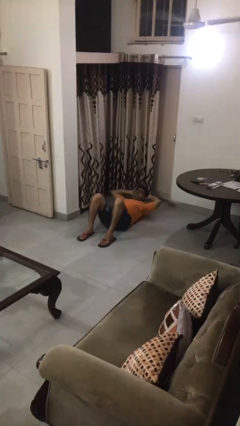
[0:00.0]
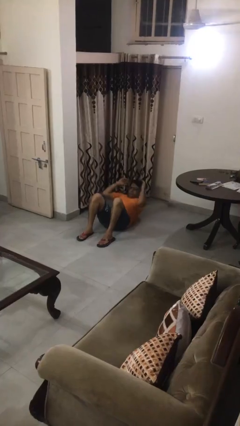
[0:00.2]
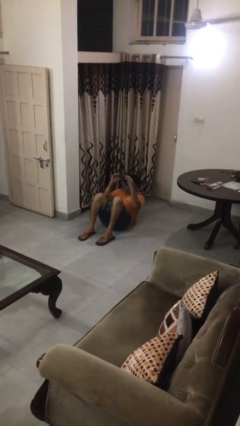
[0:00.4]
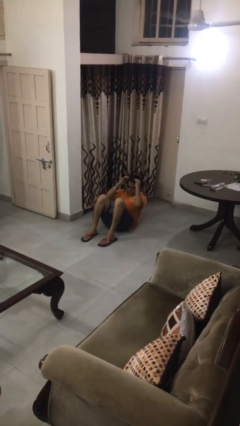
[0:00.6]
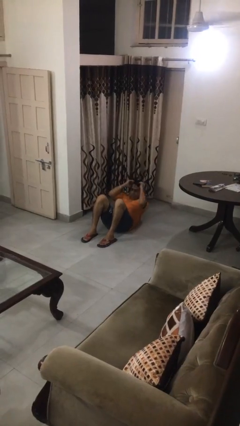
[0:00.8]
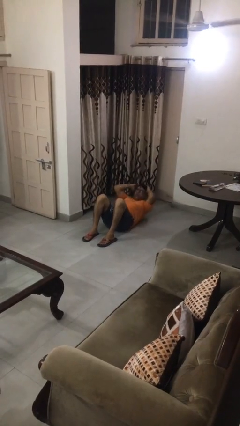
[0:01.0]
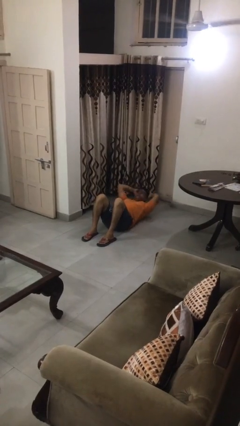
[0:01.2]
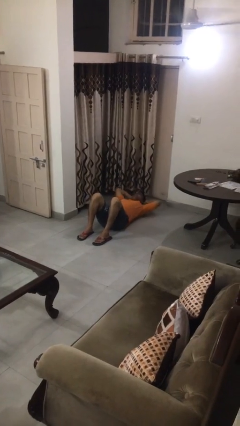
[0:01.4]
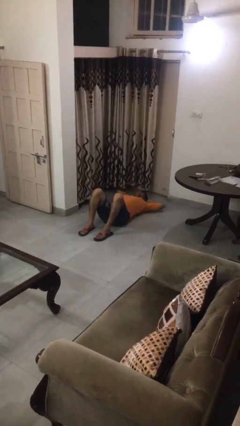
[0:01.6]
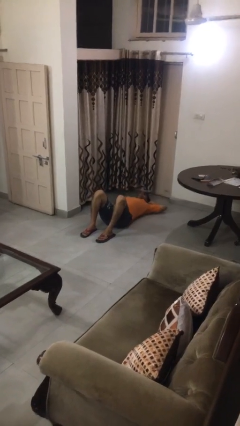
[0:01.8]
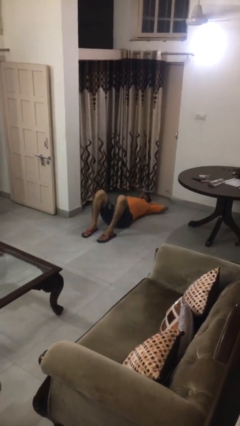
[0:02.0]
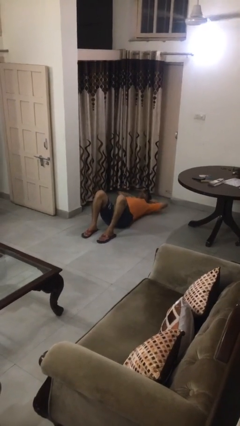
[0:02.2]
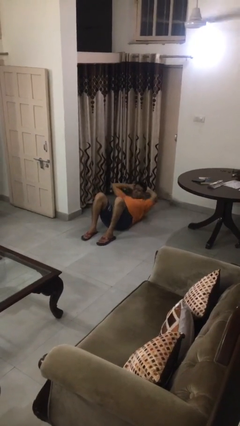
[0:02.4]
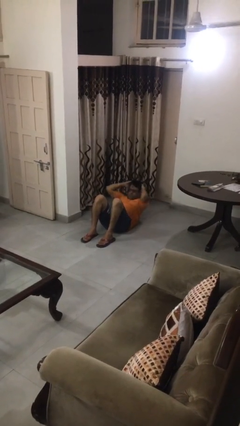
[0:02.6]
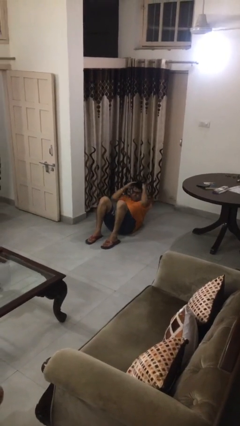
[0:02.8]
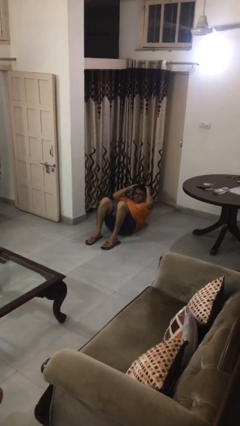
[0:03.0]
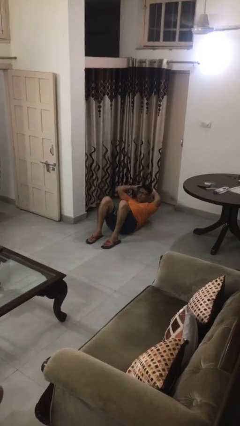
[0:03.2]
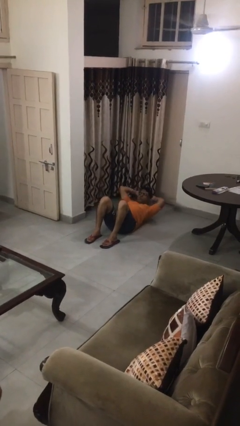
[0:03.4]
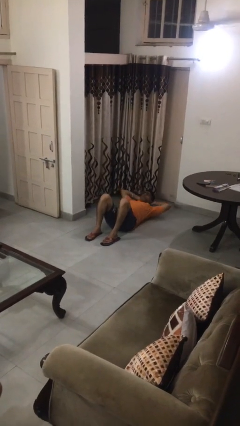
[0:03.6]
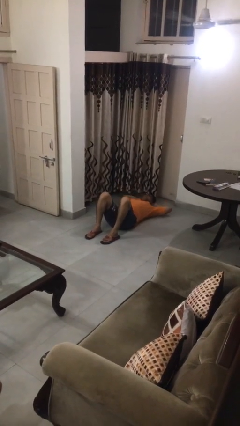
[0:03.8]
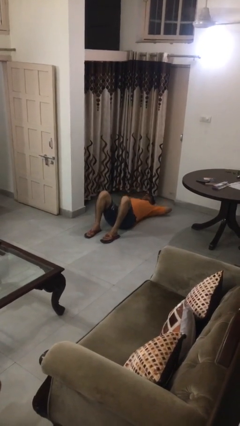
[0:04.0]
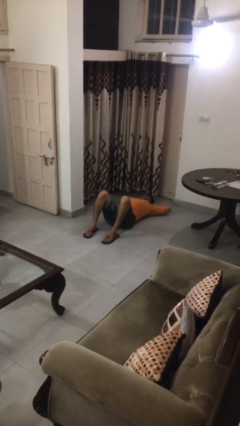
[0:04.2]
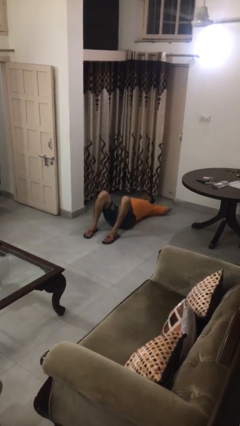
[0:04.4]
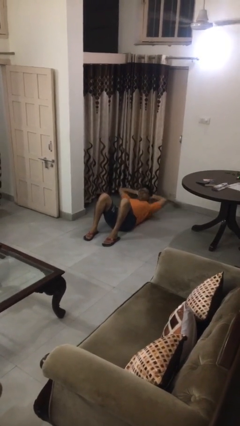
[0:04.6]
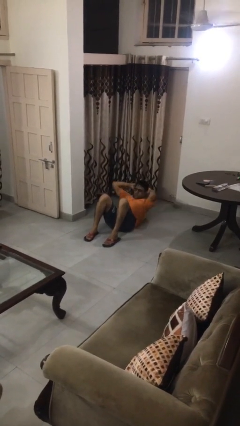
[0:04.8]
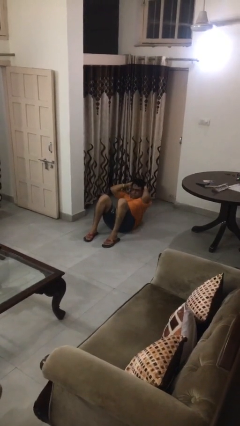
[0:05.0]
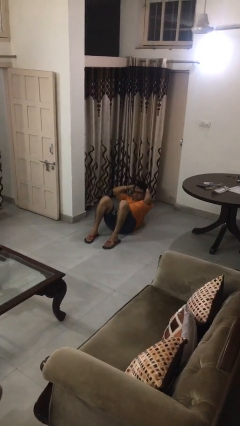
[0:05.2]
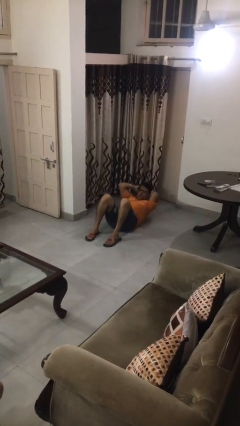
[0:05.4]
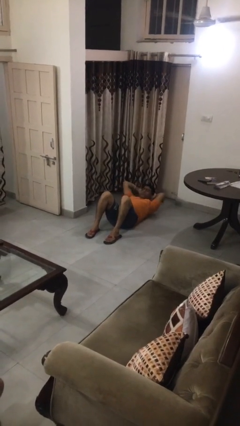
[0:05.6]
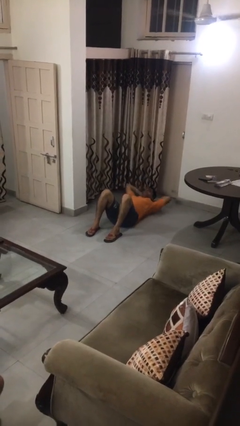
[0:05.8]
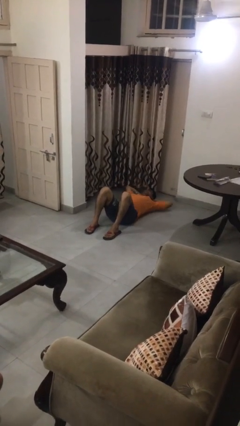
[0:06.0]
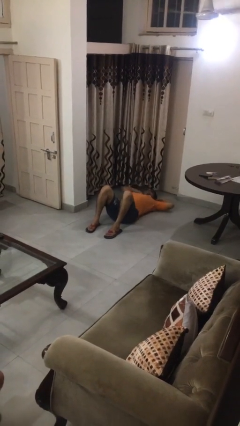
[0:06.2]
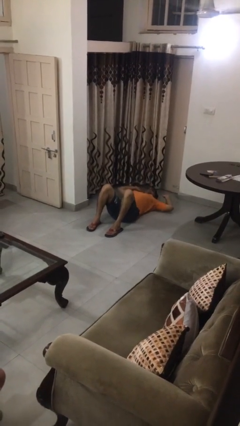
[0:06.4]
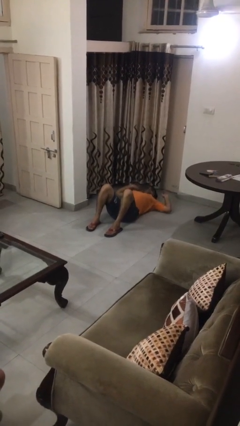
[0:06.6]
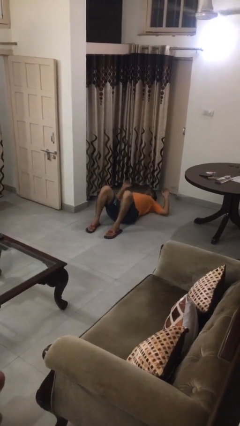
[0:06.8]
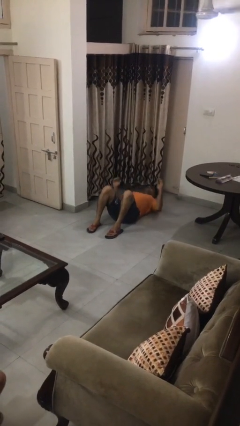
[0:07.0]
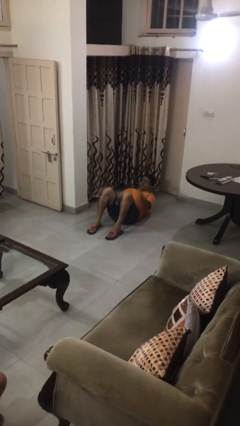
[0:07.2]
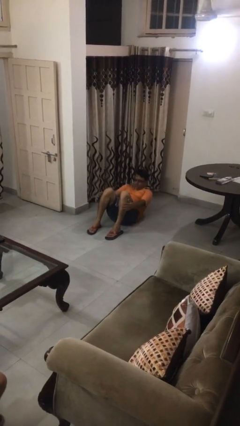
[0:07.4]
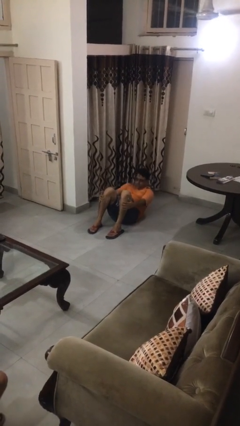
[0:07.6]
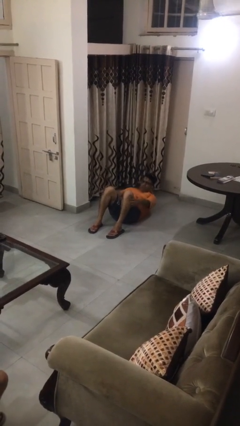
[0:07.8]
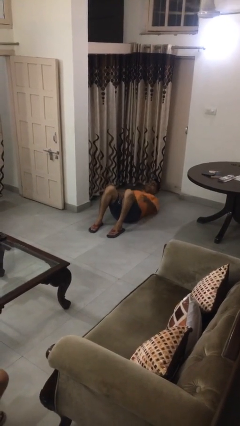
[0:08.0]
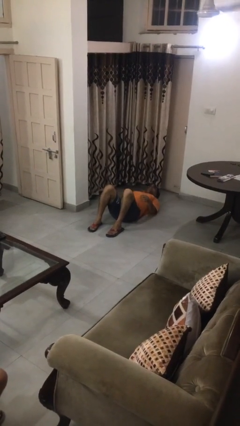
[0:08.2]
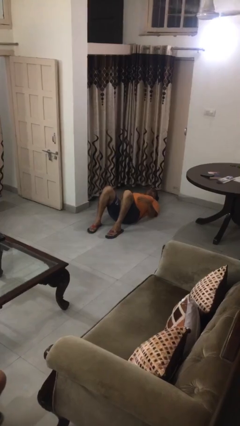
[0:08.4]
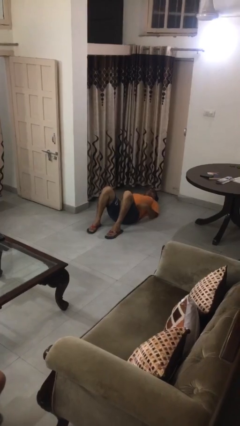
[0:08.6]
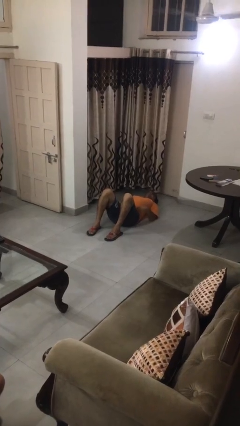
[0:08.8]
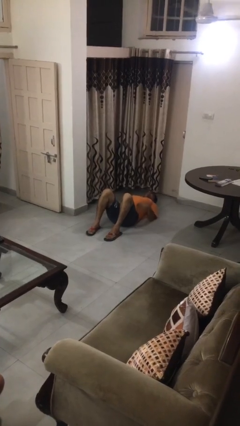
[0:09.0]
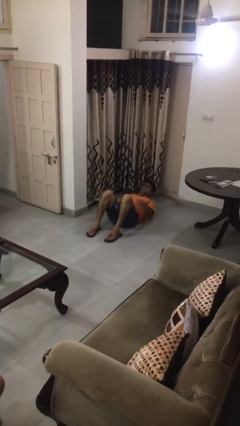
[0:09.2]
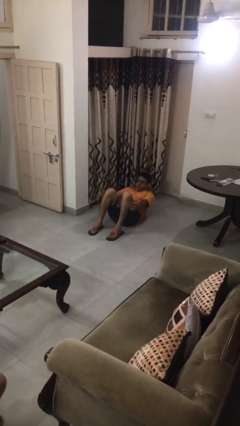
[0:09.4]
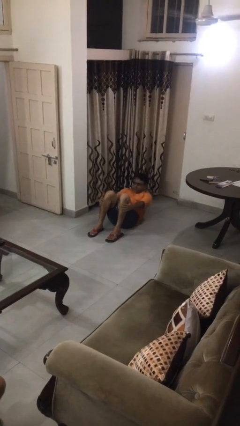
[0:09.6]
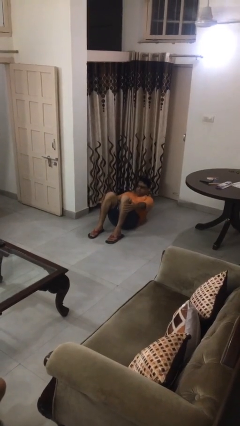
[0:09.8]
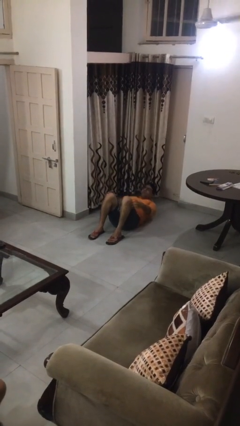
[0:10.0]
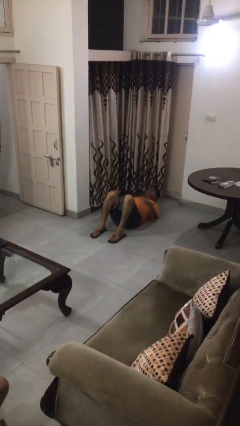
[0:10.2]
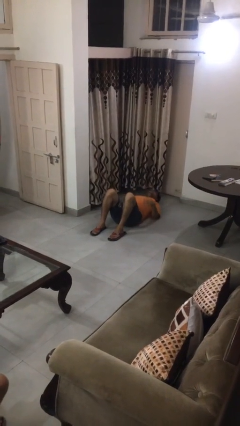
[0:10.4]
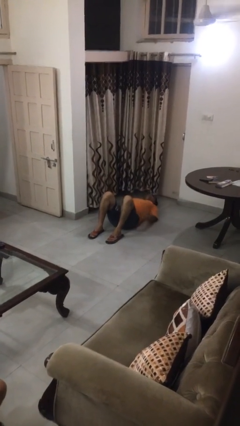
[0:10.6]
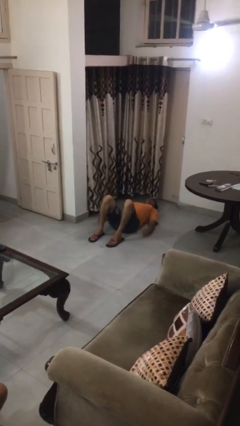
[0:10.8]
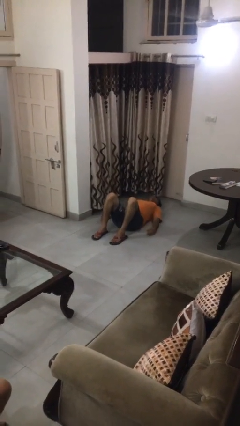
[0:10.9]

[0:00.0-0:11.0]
person exercises with situp

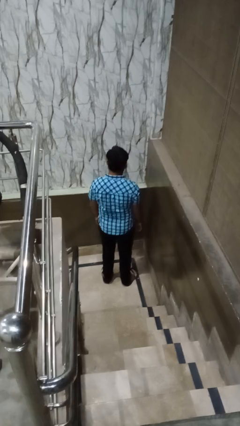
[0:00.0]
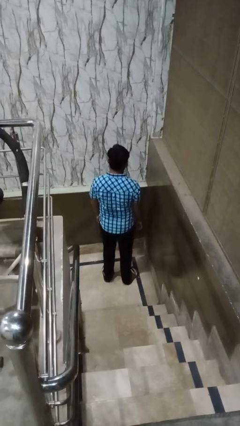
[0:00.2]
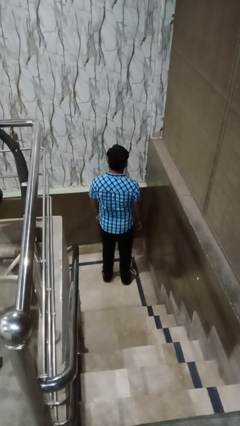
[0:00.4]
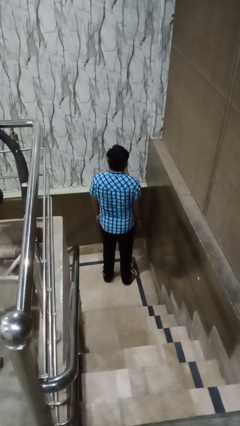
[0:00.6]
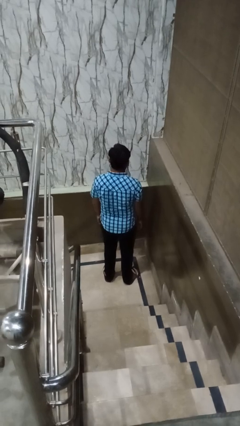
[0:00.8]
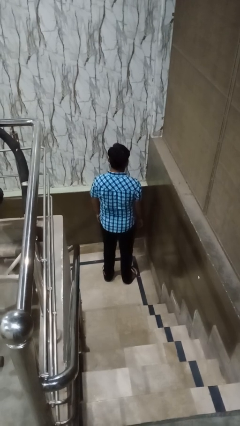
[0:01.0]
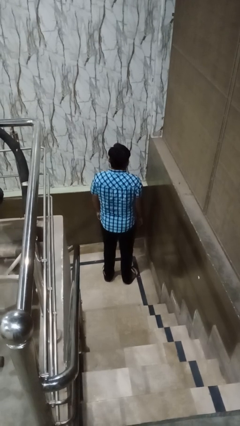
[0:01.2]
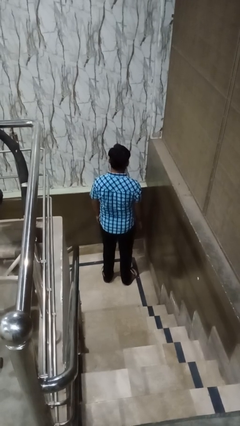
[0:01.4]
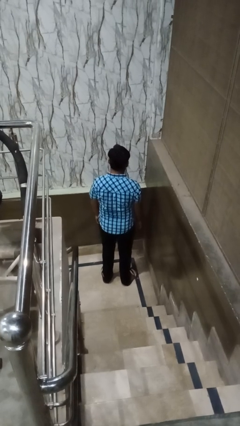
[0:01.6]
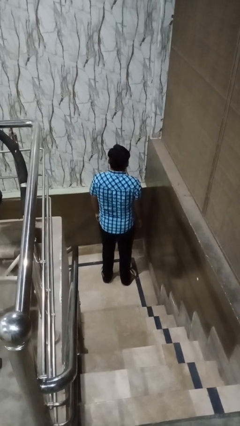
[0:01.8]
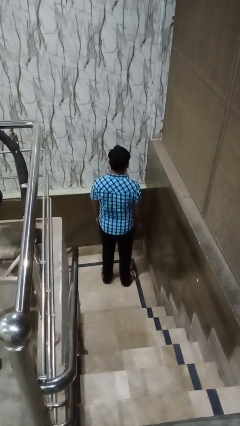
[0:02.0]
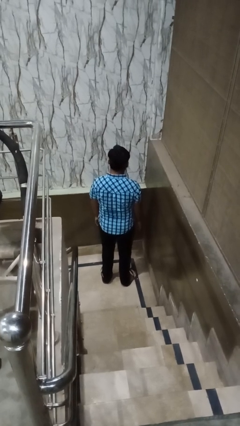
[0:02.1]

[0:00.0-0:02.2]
person shrugs

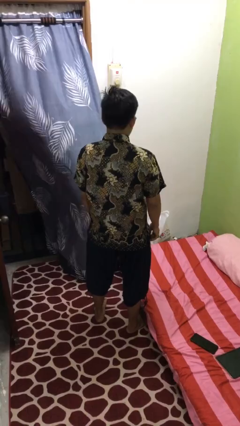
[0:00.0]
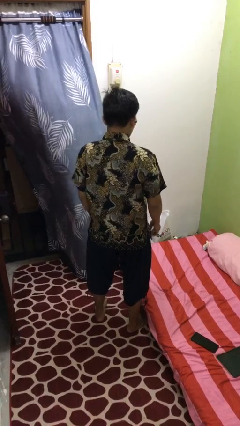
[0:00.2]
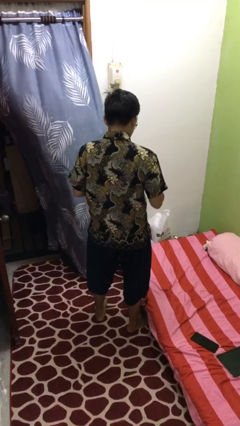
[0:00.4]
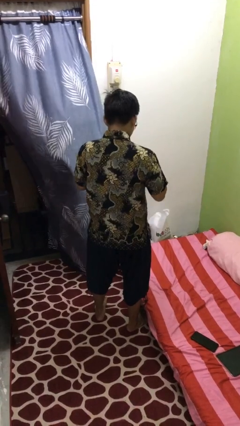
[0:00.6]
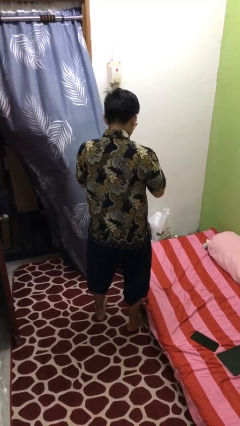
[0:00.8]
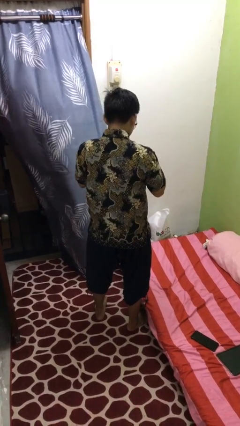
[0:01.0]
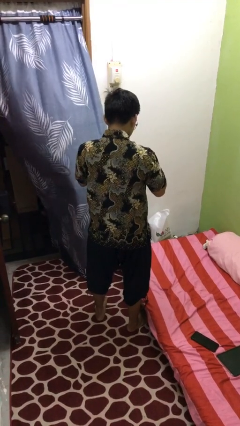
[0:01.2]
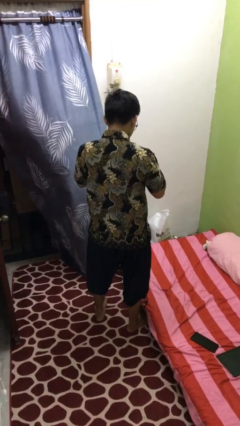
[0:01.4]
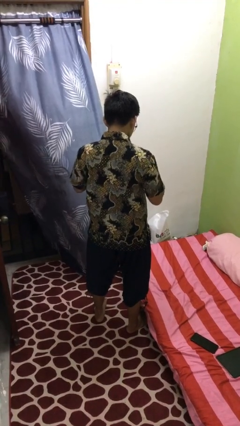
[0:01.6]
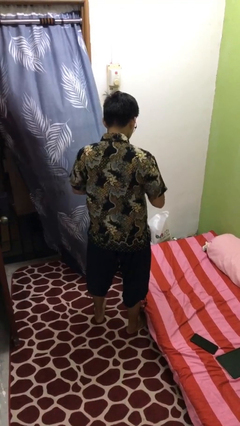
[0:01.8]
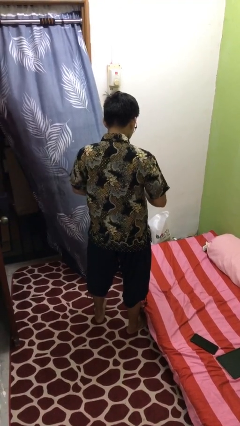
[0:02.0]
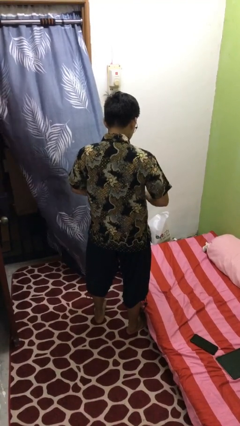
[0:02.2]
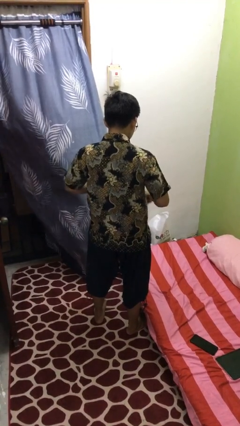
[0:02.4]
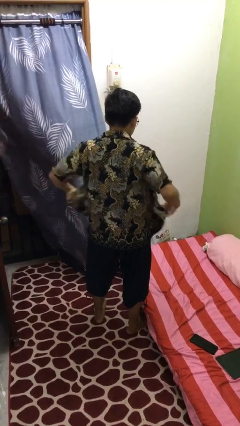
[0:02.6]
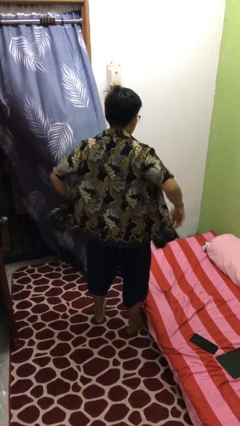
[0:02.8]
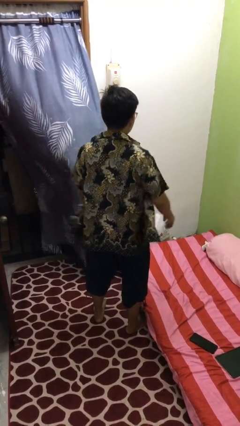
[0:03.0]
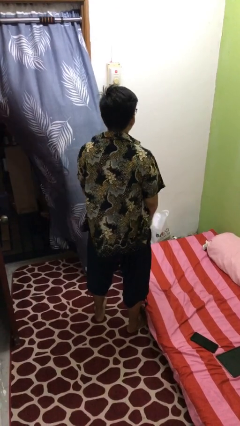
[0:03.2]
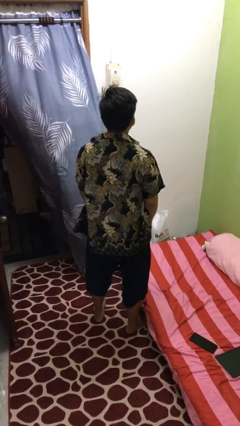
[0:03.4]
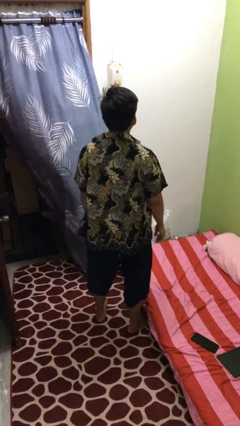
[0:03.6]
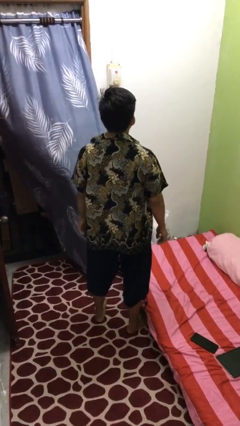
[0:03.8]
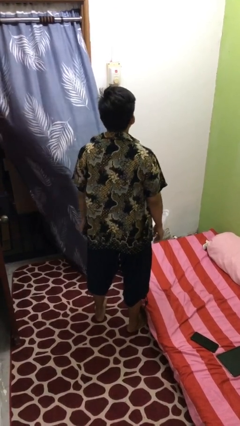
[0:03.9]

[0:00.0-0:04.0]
person unbuttons shirt

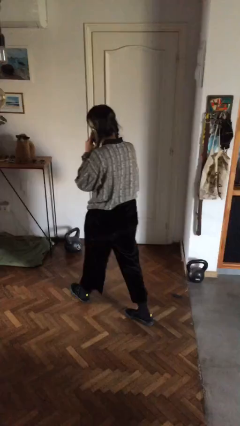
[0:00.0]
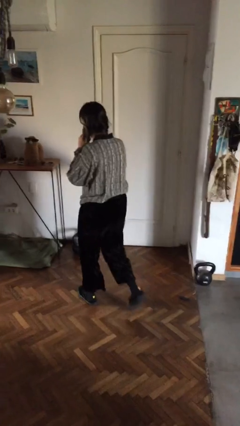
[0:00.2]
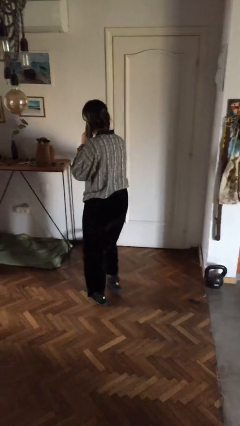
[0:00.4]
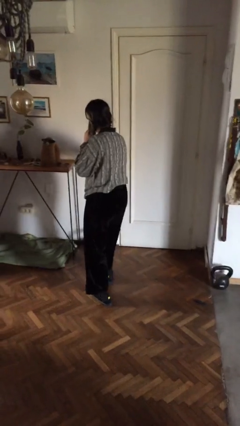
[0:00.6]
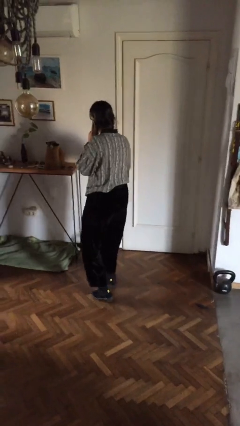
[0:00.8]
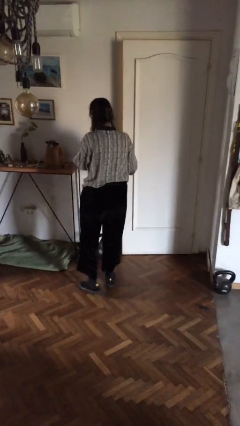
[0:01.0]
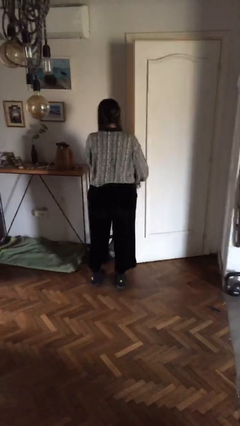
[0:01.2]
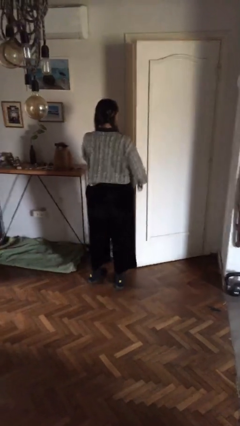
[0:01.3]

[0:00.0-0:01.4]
person opens facility door
